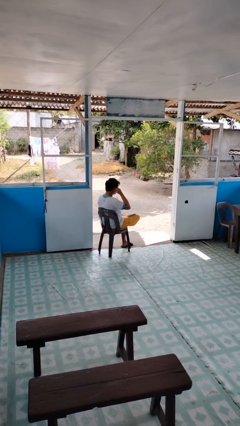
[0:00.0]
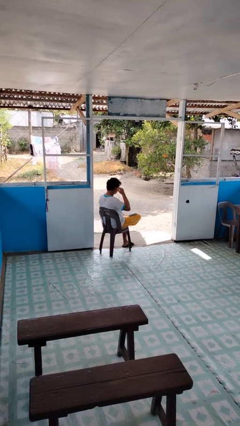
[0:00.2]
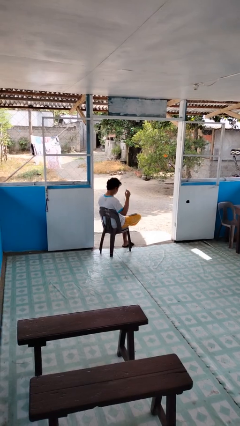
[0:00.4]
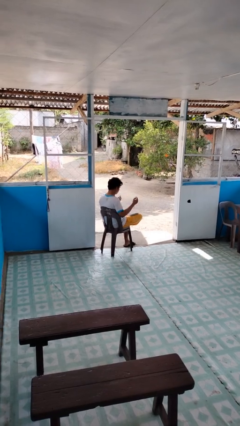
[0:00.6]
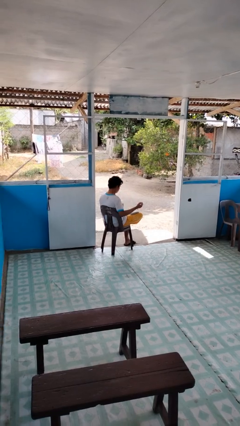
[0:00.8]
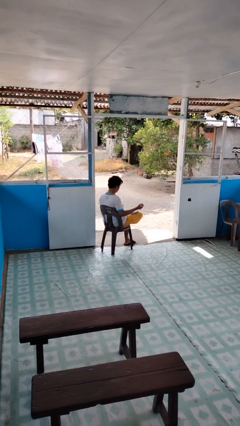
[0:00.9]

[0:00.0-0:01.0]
person takes off headphones

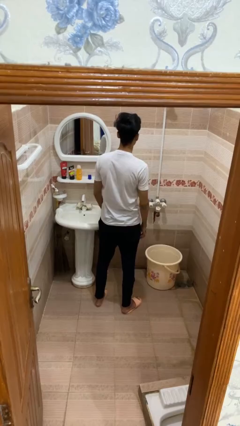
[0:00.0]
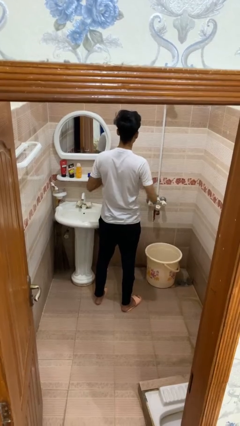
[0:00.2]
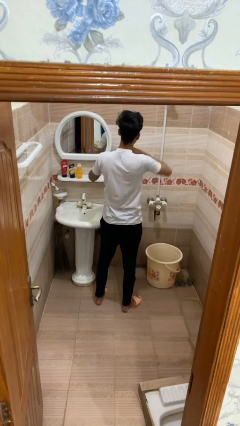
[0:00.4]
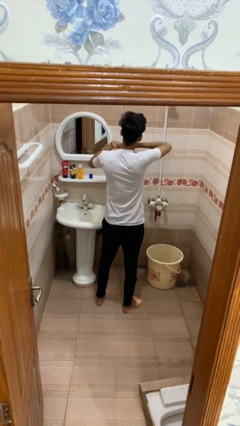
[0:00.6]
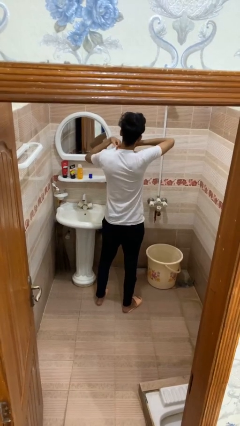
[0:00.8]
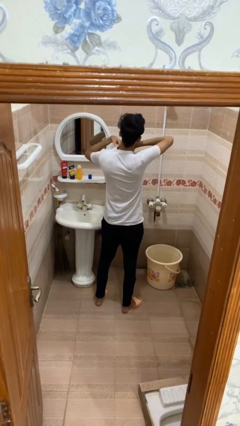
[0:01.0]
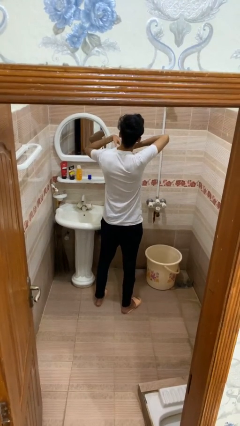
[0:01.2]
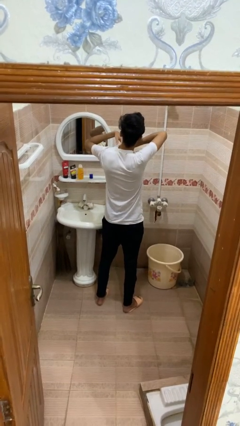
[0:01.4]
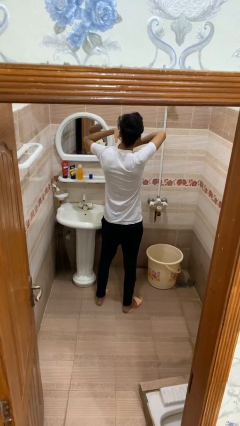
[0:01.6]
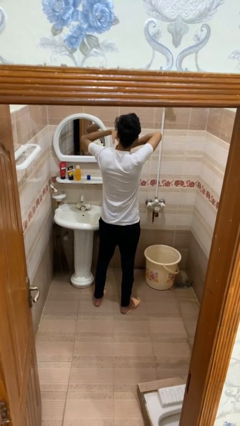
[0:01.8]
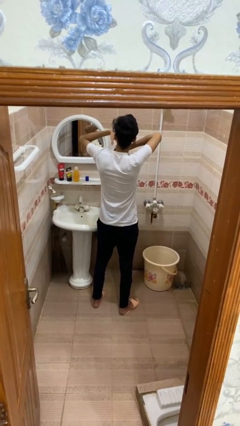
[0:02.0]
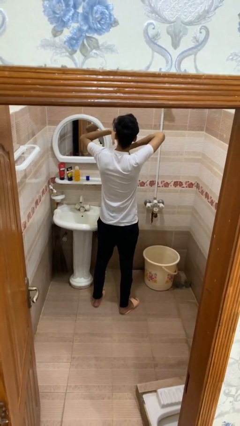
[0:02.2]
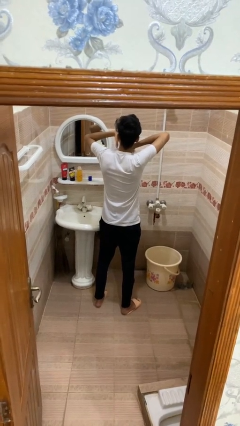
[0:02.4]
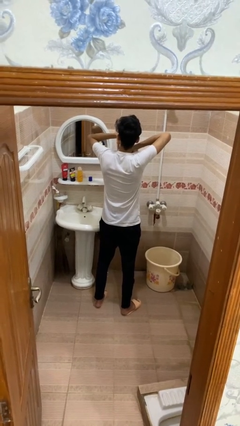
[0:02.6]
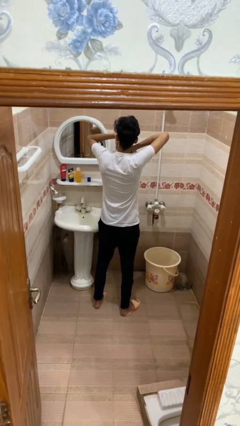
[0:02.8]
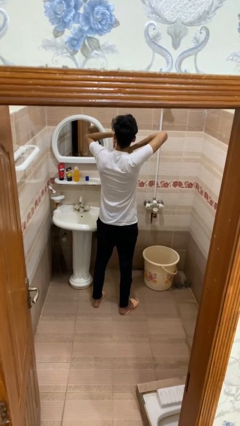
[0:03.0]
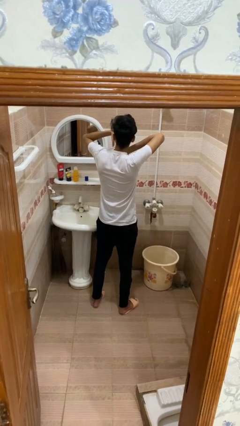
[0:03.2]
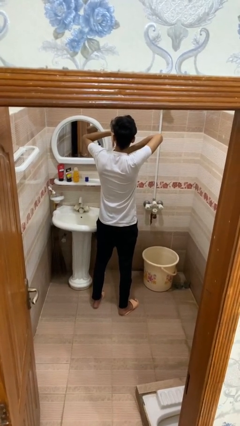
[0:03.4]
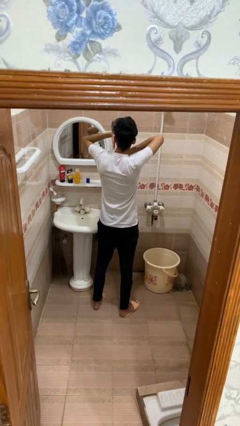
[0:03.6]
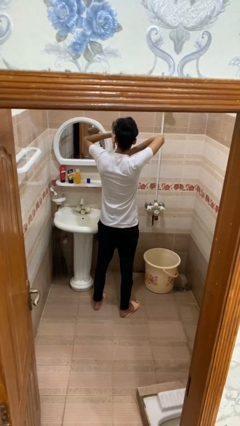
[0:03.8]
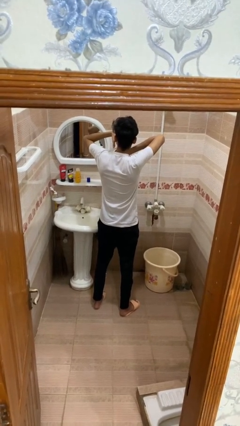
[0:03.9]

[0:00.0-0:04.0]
person applies deodorant

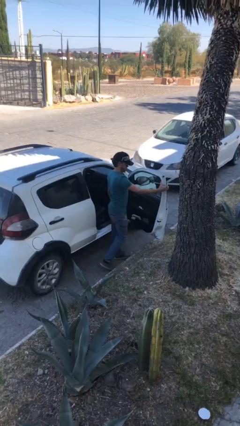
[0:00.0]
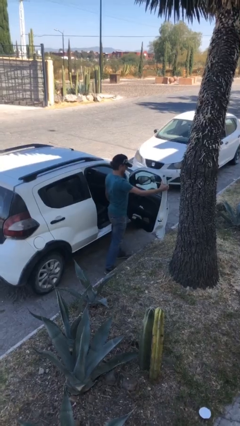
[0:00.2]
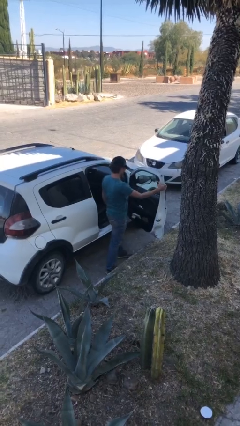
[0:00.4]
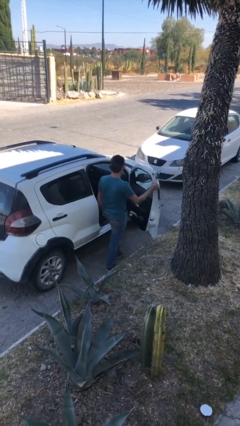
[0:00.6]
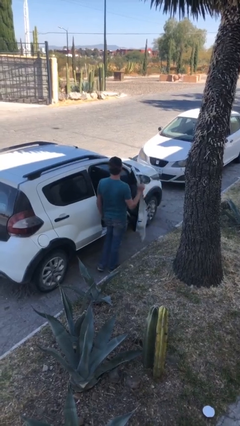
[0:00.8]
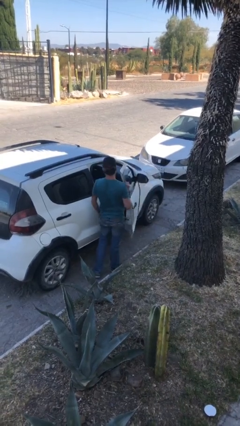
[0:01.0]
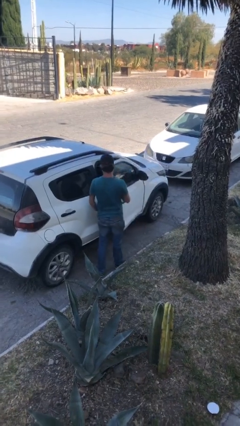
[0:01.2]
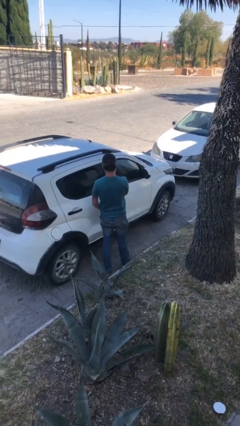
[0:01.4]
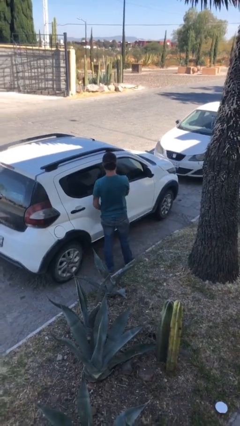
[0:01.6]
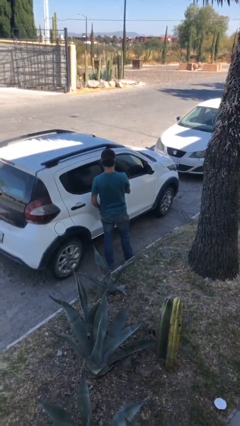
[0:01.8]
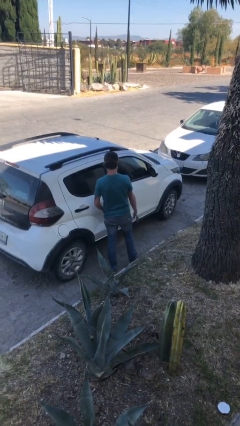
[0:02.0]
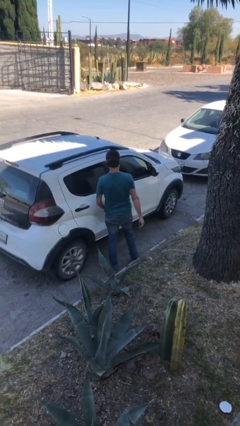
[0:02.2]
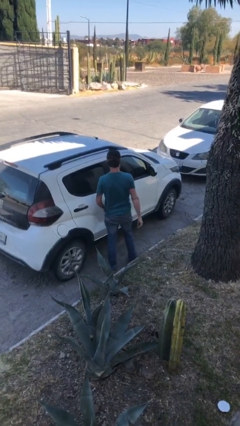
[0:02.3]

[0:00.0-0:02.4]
person closes car door

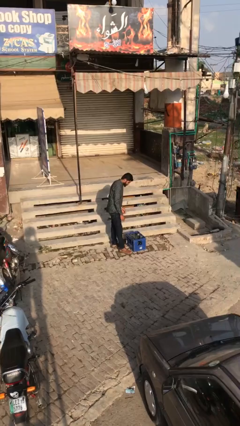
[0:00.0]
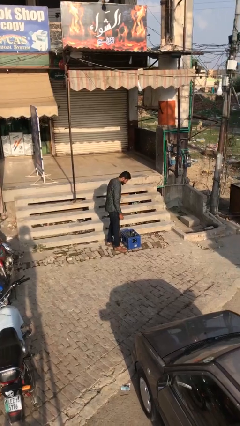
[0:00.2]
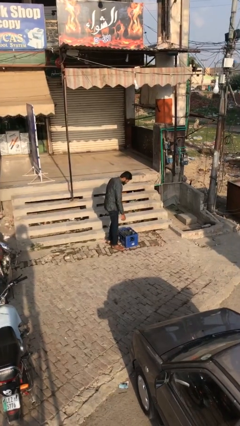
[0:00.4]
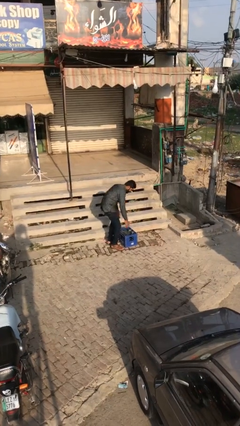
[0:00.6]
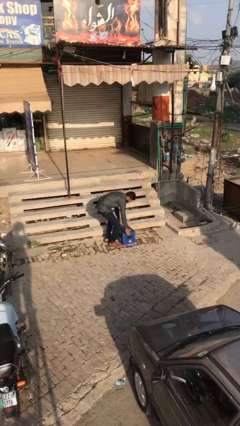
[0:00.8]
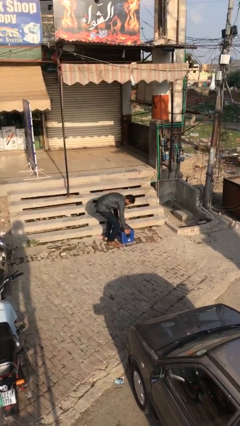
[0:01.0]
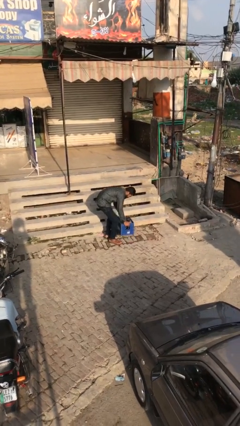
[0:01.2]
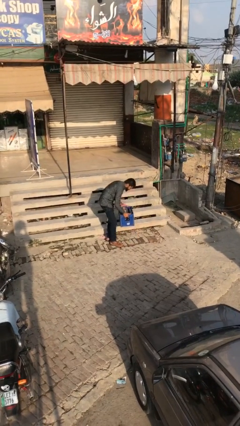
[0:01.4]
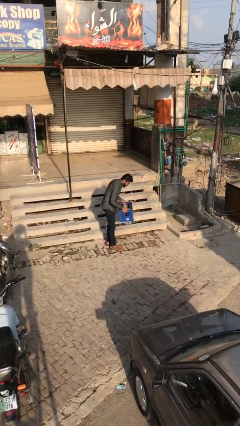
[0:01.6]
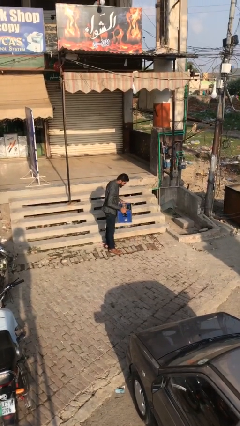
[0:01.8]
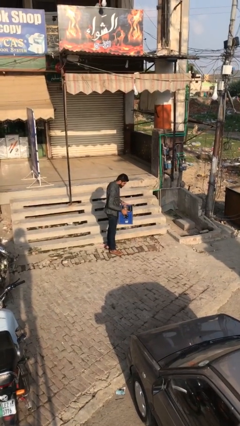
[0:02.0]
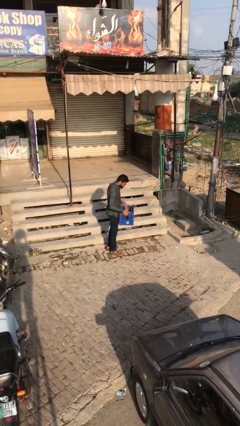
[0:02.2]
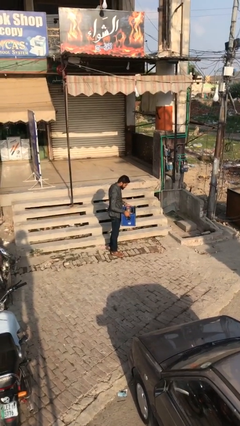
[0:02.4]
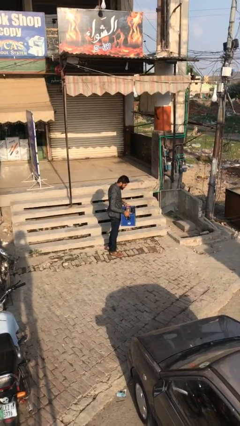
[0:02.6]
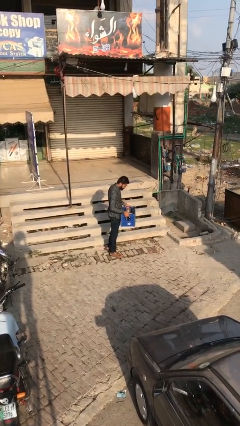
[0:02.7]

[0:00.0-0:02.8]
person picks up object from floor

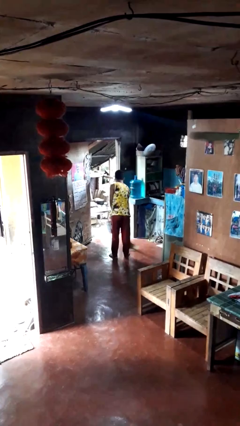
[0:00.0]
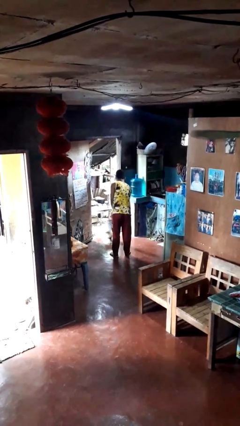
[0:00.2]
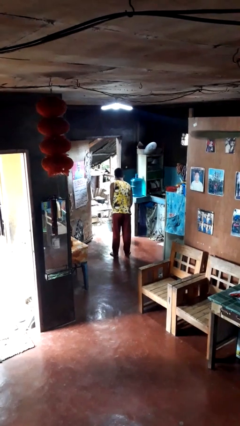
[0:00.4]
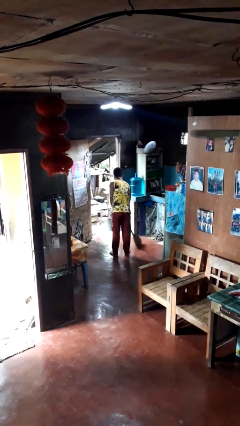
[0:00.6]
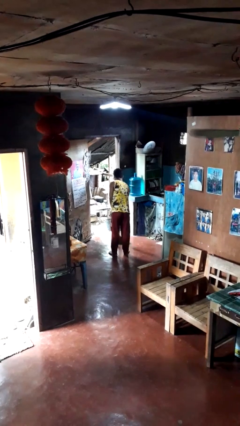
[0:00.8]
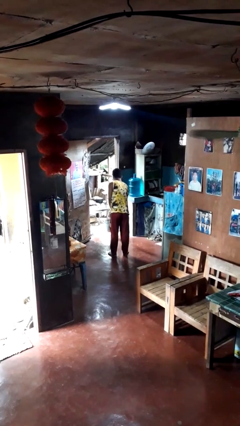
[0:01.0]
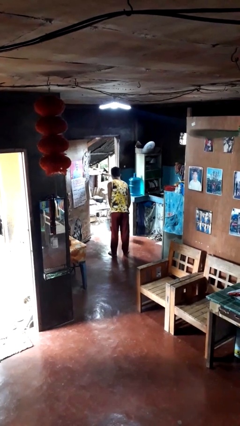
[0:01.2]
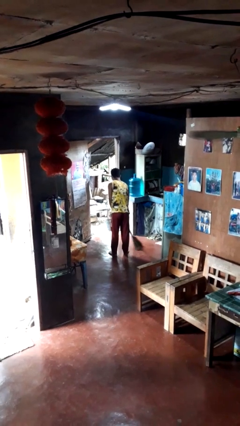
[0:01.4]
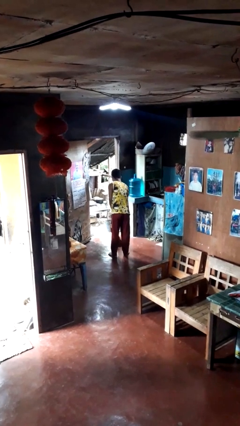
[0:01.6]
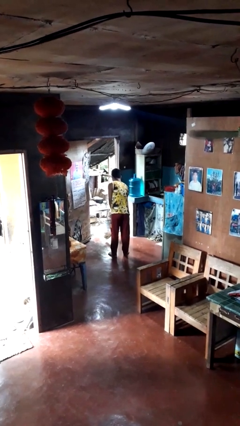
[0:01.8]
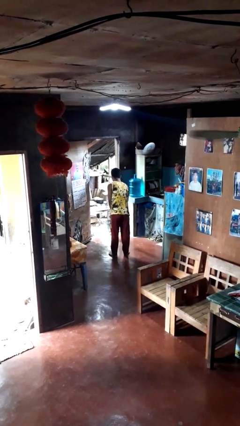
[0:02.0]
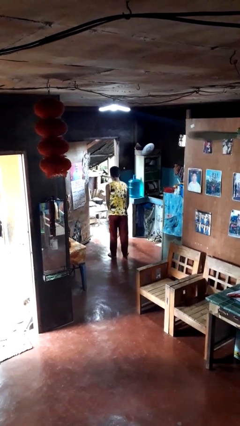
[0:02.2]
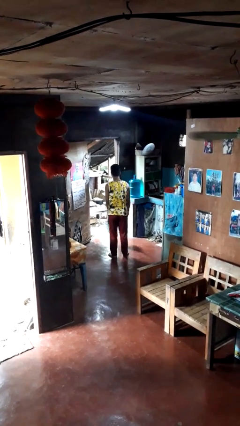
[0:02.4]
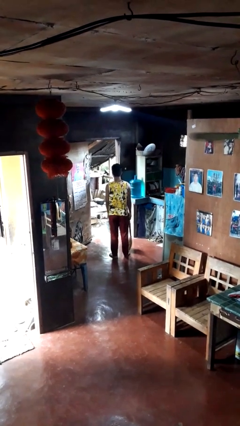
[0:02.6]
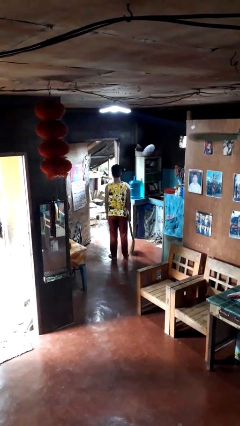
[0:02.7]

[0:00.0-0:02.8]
person sweeps floor

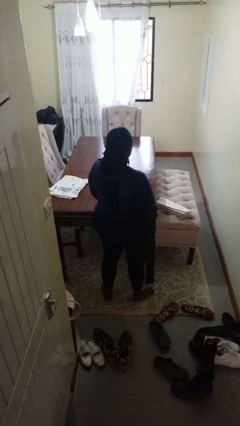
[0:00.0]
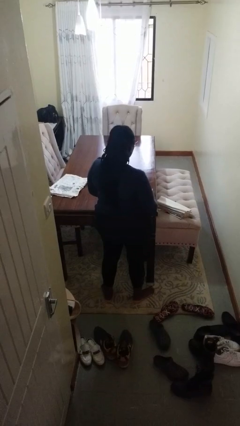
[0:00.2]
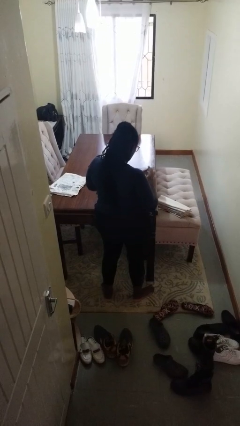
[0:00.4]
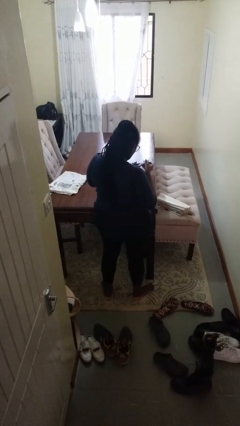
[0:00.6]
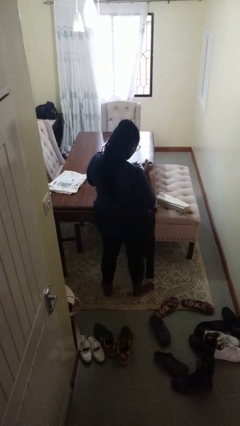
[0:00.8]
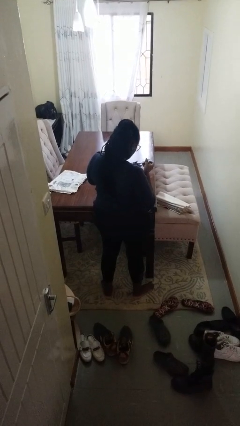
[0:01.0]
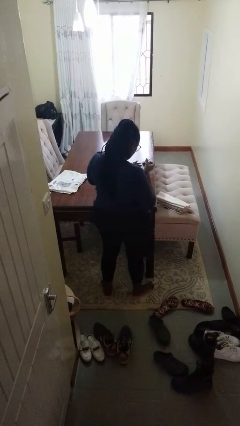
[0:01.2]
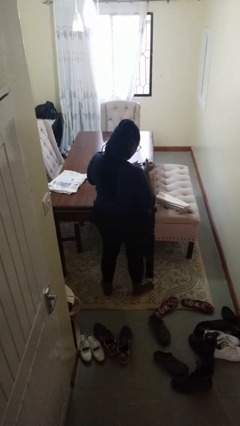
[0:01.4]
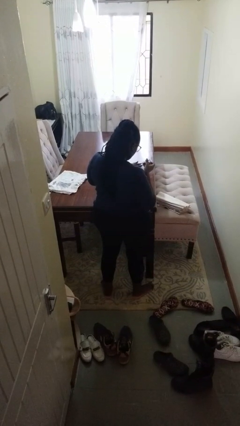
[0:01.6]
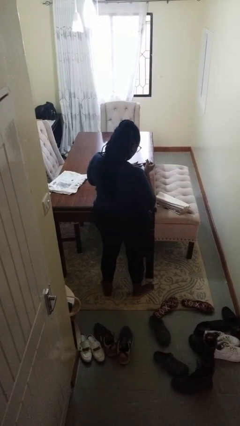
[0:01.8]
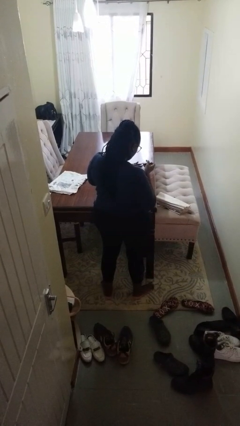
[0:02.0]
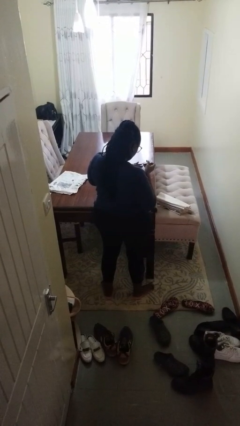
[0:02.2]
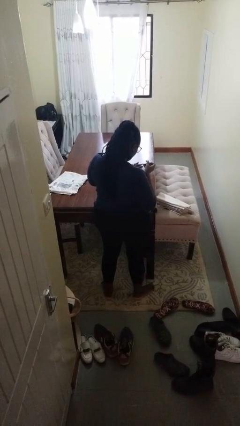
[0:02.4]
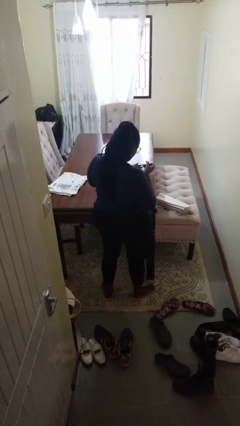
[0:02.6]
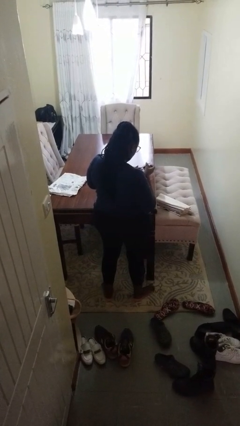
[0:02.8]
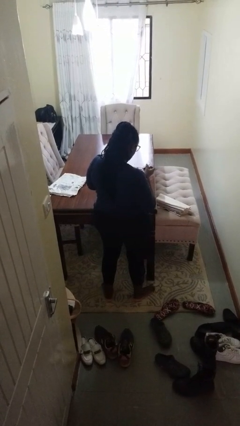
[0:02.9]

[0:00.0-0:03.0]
person clips fingernails

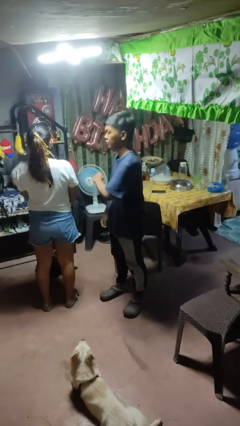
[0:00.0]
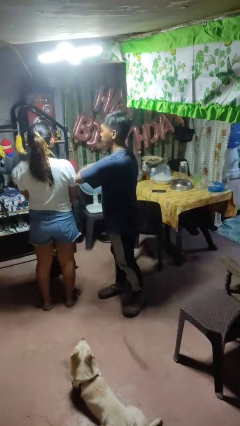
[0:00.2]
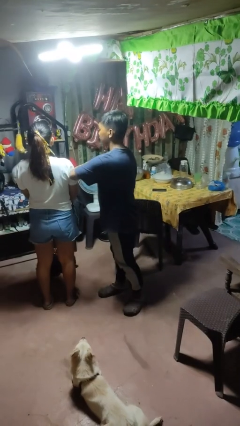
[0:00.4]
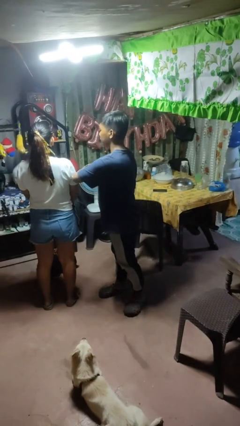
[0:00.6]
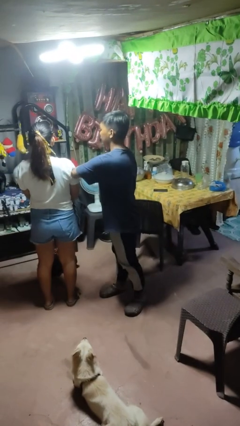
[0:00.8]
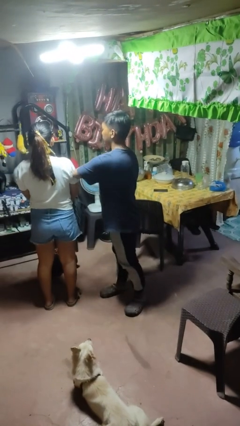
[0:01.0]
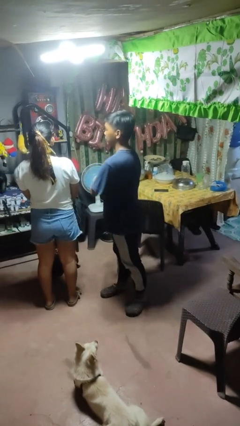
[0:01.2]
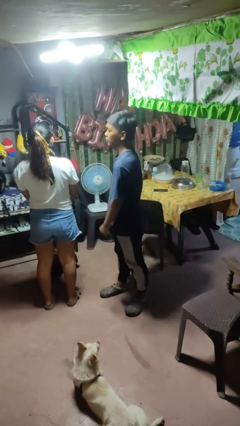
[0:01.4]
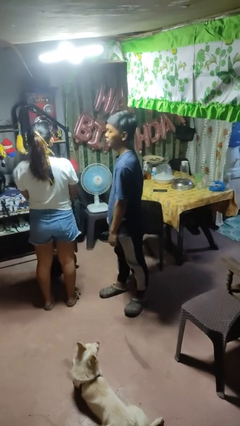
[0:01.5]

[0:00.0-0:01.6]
person nudges person with elbow
